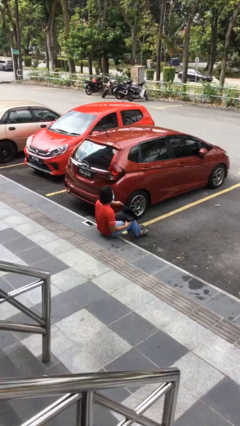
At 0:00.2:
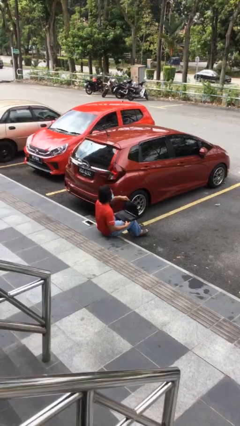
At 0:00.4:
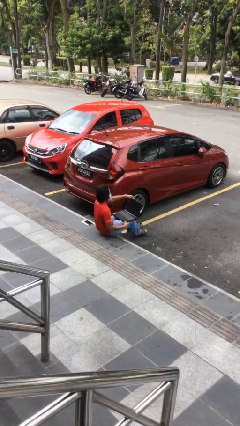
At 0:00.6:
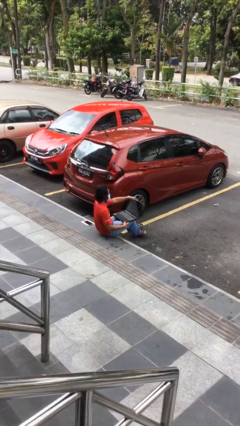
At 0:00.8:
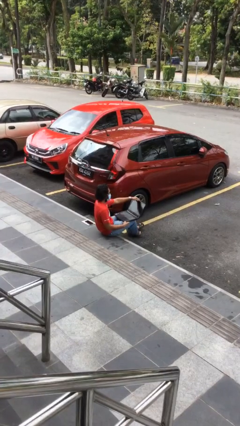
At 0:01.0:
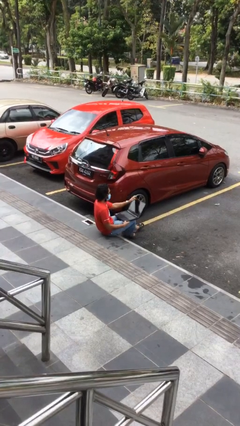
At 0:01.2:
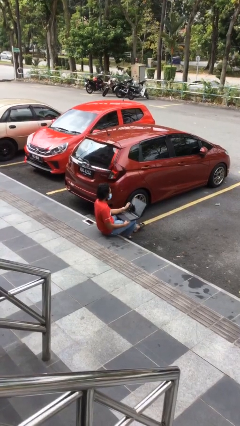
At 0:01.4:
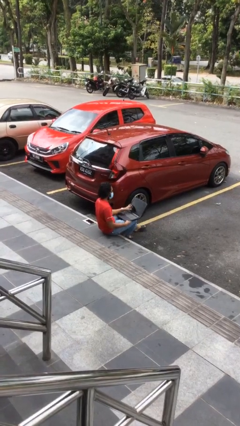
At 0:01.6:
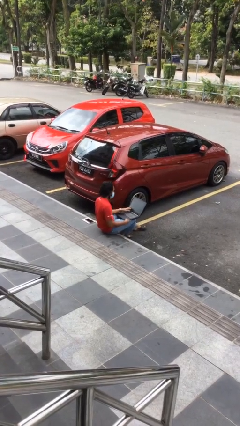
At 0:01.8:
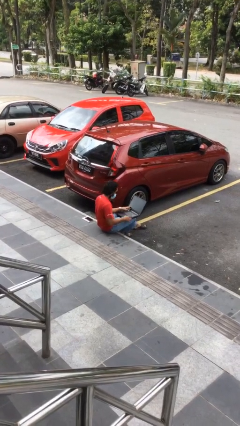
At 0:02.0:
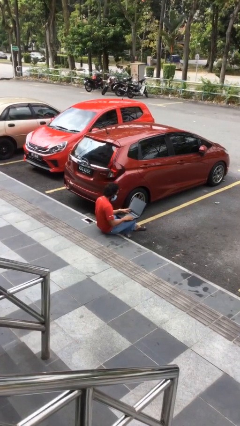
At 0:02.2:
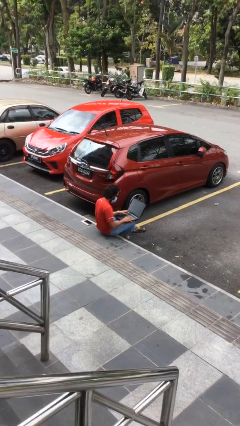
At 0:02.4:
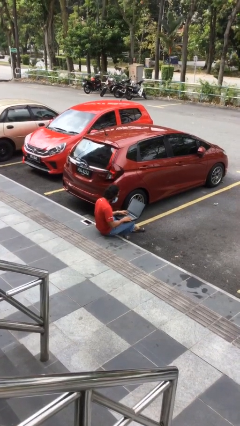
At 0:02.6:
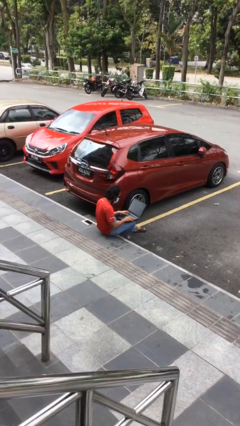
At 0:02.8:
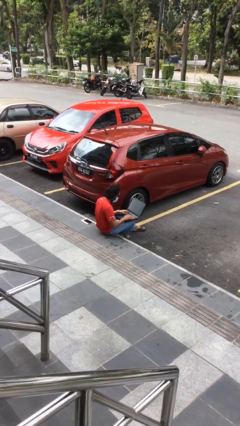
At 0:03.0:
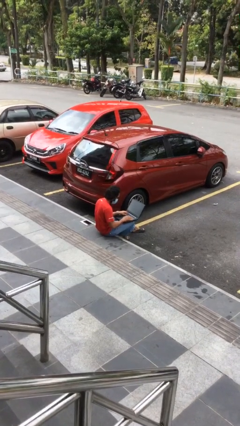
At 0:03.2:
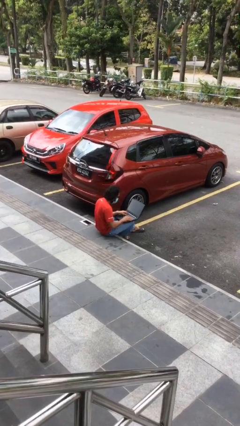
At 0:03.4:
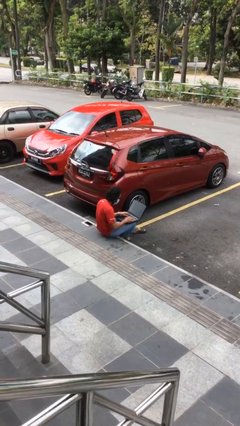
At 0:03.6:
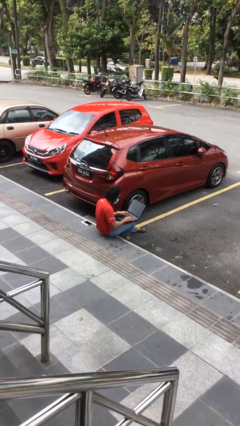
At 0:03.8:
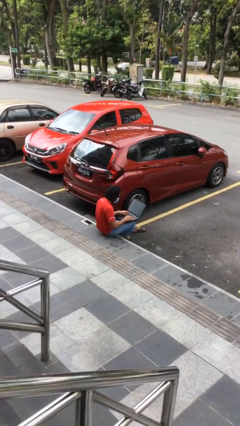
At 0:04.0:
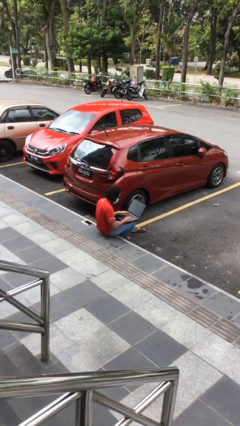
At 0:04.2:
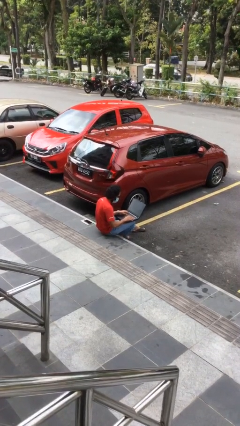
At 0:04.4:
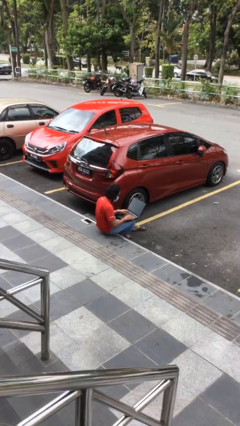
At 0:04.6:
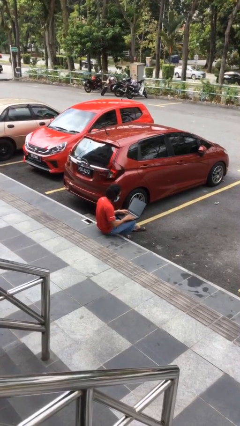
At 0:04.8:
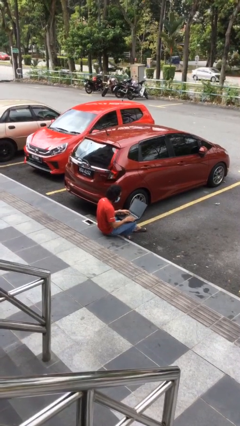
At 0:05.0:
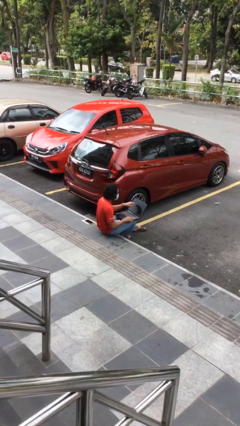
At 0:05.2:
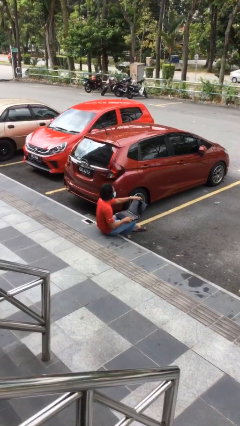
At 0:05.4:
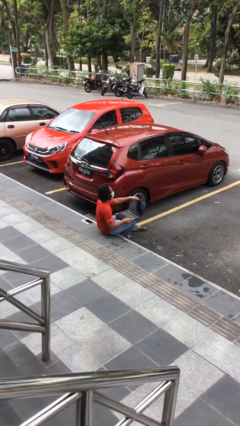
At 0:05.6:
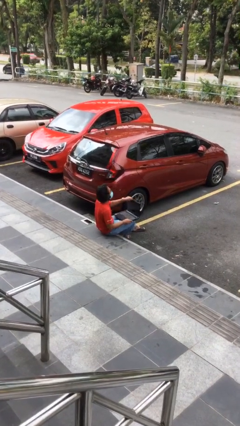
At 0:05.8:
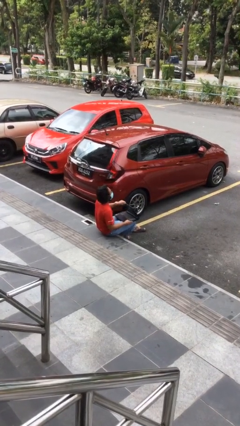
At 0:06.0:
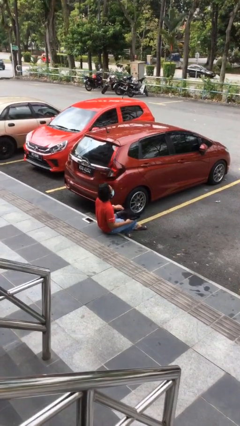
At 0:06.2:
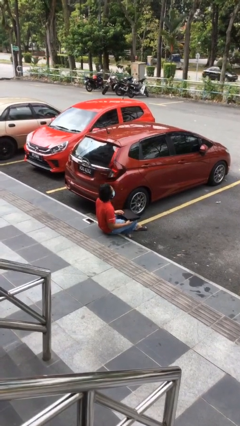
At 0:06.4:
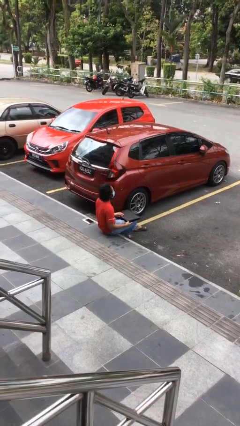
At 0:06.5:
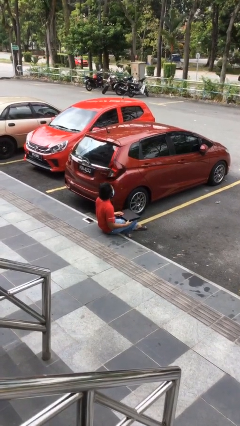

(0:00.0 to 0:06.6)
person interacts with laptop

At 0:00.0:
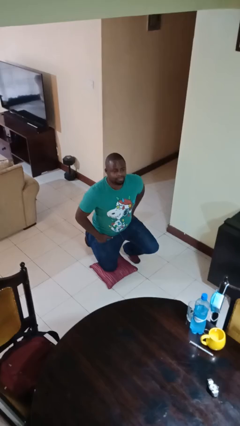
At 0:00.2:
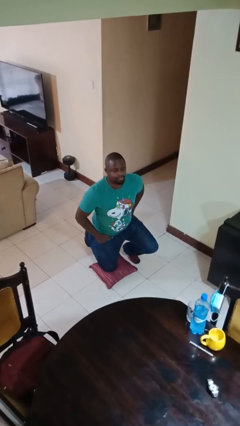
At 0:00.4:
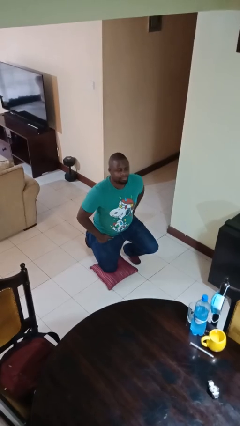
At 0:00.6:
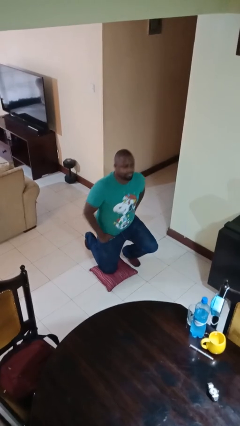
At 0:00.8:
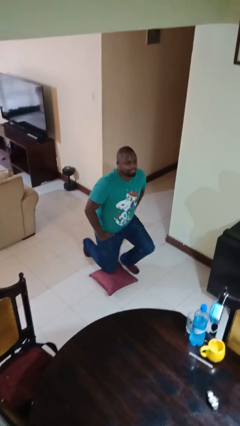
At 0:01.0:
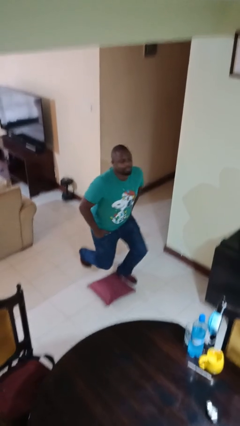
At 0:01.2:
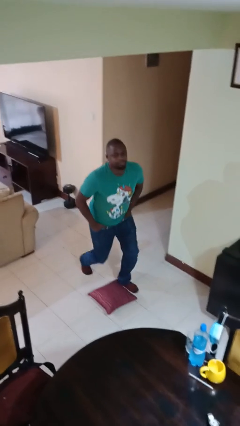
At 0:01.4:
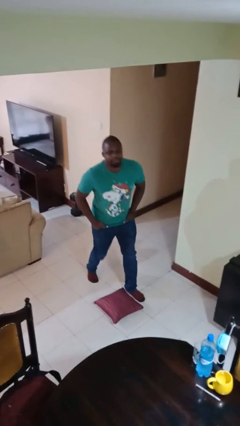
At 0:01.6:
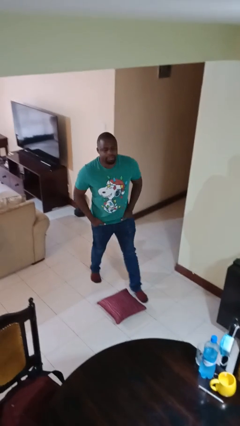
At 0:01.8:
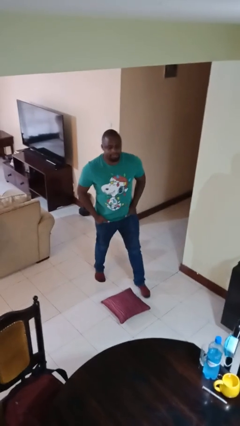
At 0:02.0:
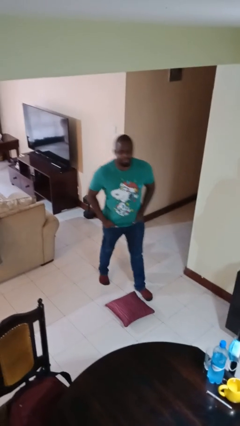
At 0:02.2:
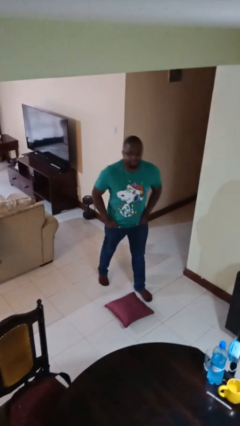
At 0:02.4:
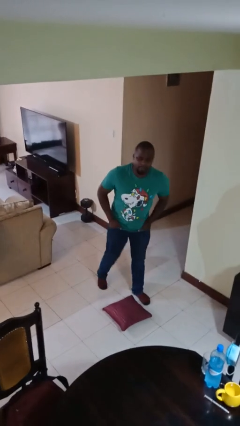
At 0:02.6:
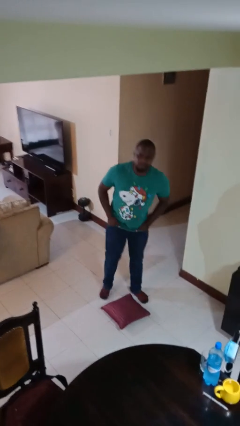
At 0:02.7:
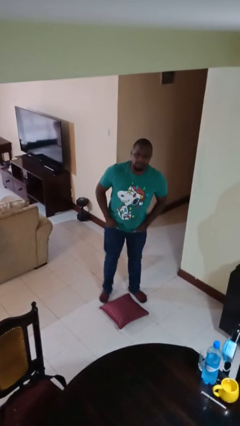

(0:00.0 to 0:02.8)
person stands up from floor

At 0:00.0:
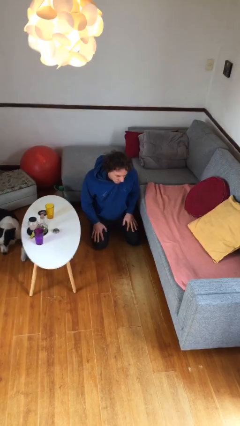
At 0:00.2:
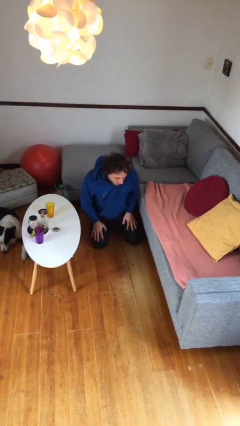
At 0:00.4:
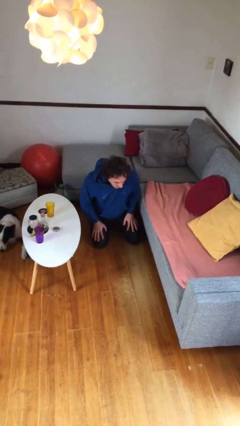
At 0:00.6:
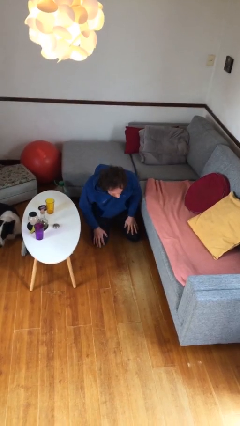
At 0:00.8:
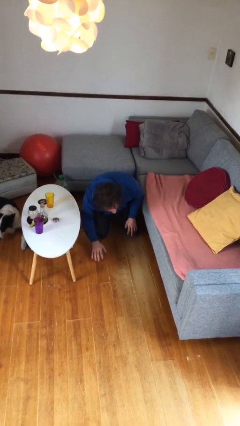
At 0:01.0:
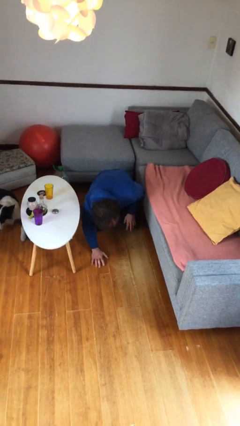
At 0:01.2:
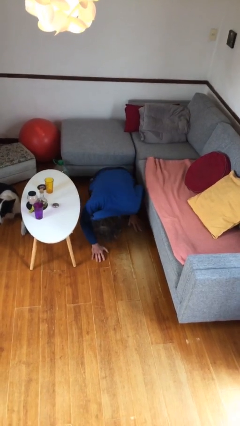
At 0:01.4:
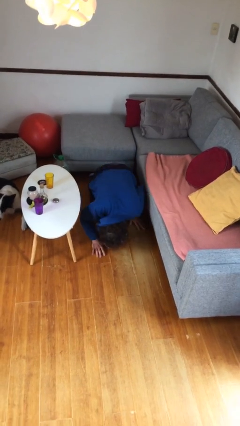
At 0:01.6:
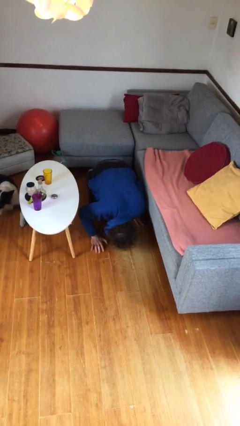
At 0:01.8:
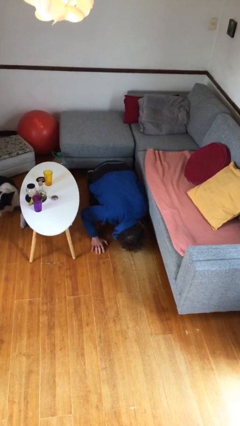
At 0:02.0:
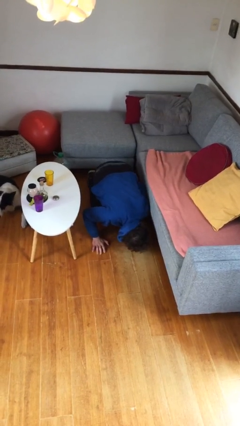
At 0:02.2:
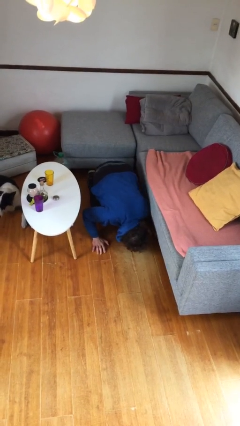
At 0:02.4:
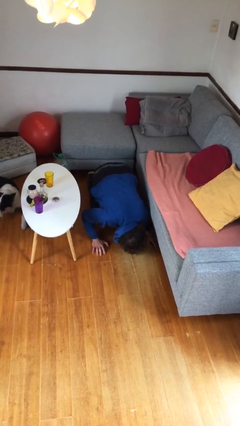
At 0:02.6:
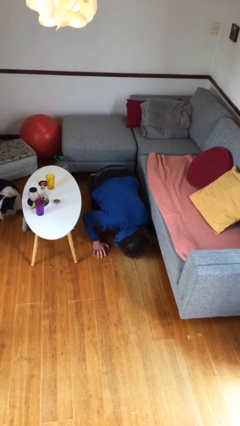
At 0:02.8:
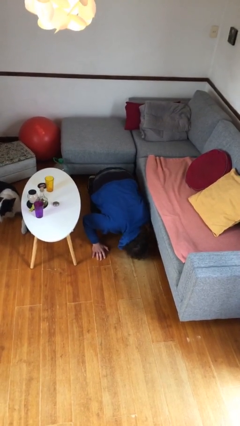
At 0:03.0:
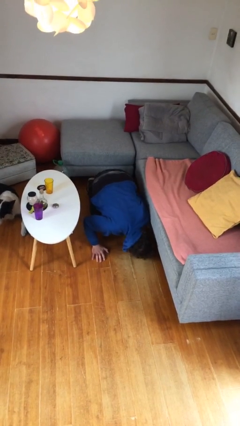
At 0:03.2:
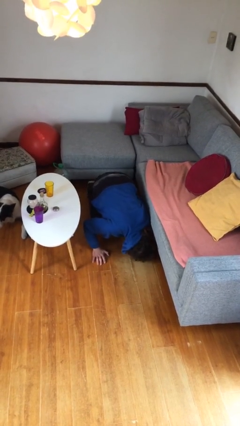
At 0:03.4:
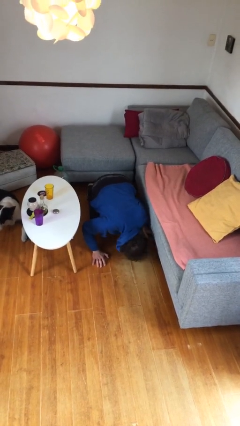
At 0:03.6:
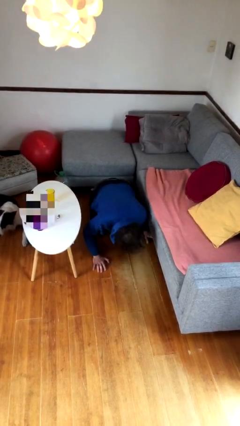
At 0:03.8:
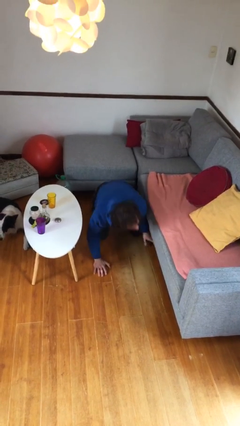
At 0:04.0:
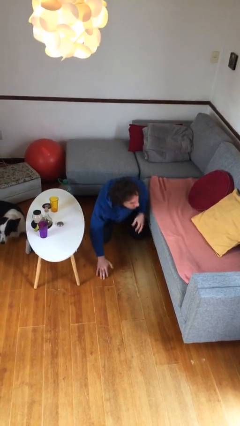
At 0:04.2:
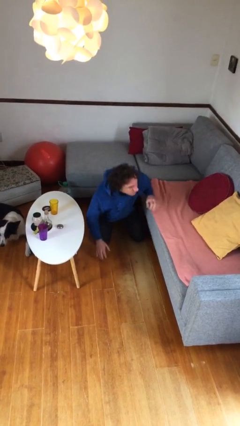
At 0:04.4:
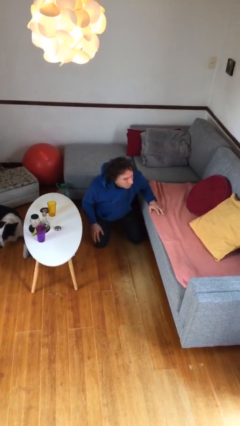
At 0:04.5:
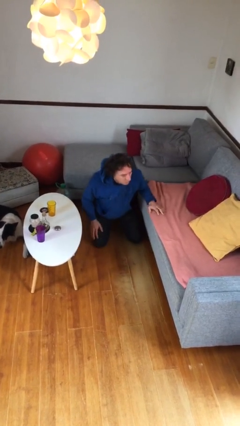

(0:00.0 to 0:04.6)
person searches under couch

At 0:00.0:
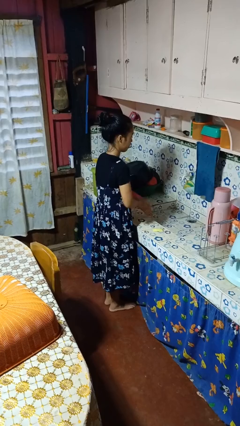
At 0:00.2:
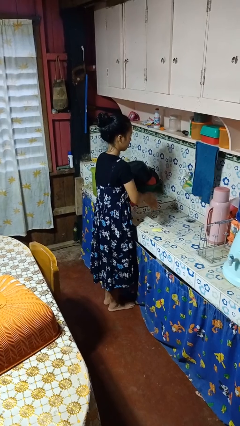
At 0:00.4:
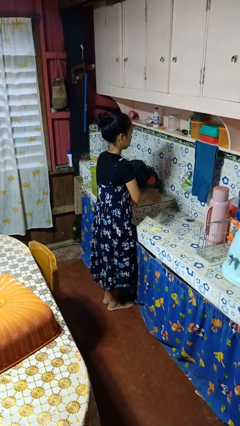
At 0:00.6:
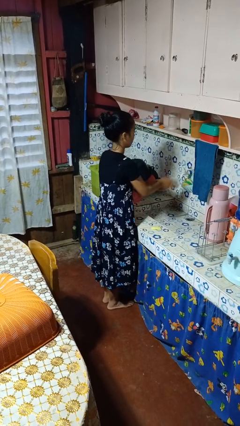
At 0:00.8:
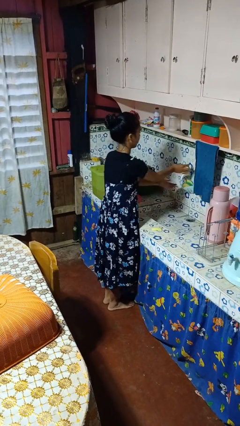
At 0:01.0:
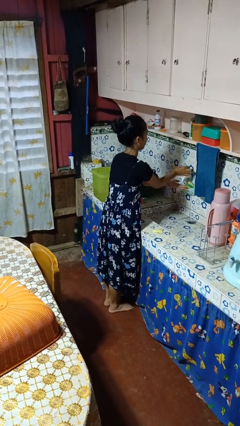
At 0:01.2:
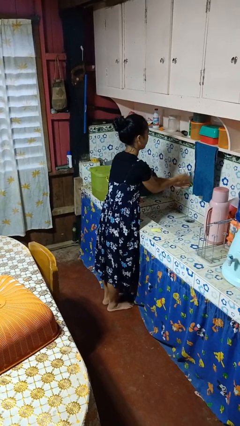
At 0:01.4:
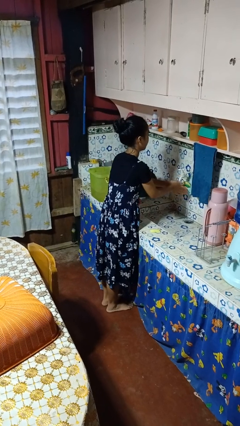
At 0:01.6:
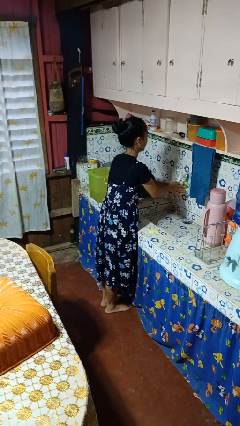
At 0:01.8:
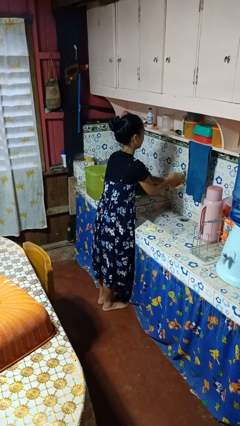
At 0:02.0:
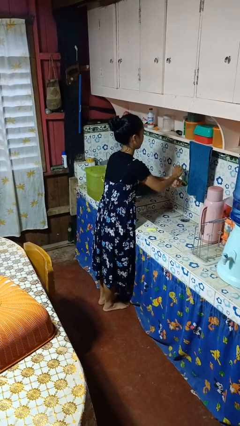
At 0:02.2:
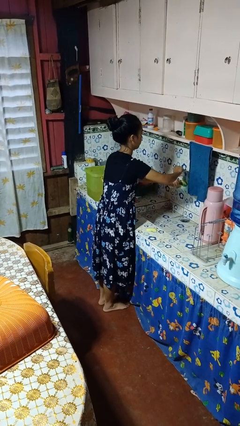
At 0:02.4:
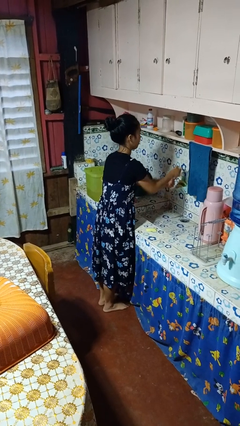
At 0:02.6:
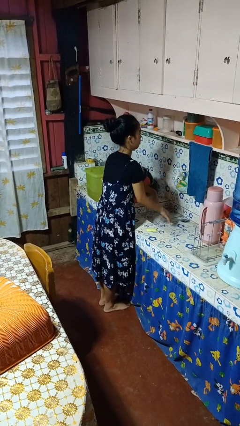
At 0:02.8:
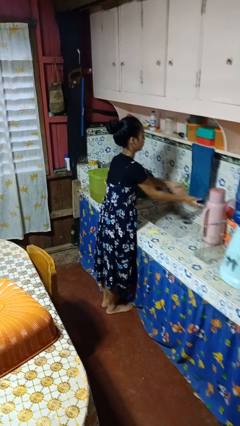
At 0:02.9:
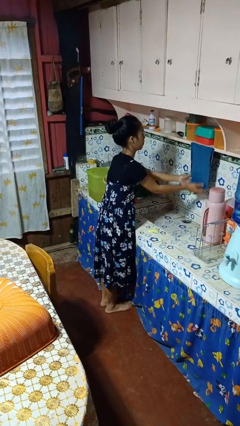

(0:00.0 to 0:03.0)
person washes hands

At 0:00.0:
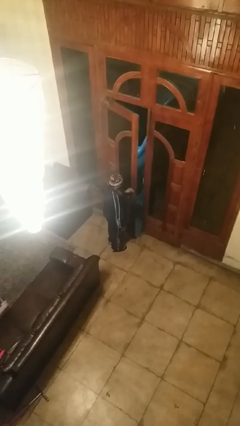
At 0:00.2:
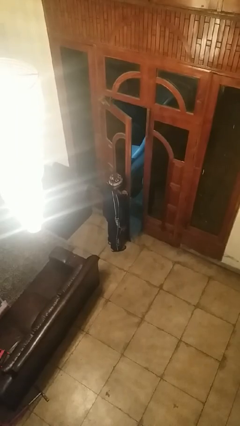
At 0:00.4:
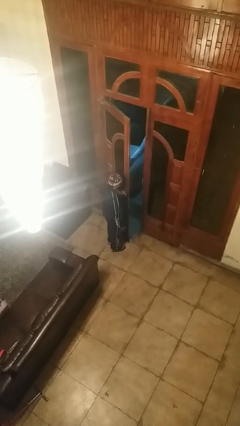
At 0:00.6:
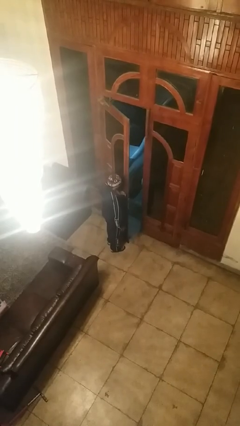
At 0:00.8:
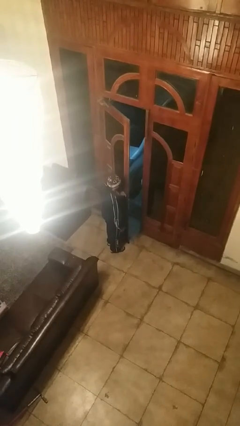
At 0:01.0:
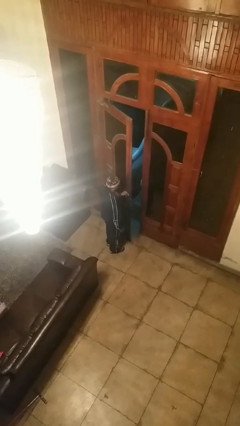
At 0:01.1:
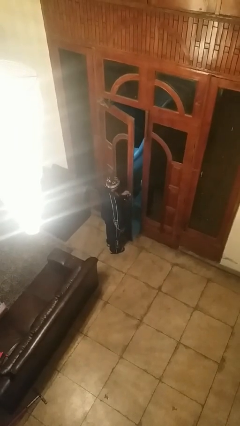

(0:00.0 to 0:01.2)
person opens facility door
